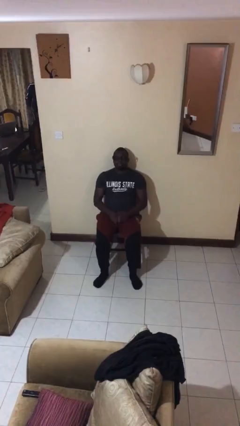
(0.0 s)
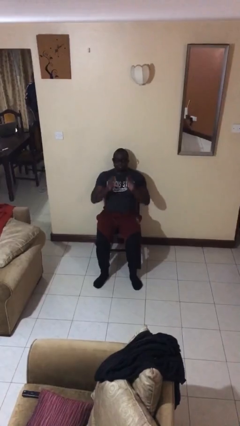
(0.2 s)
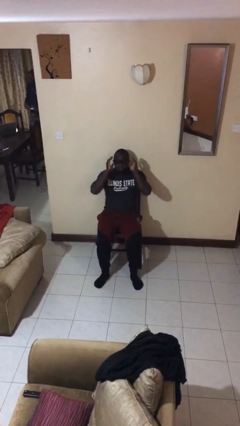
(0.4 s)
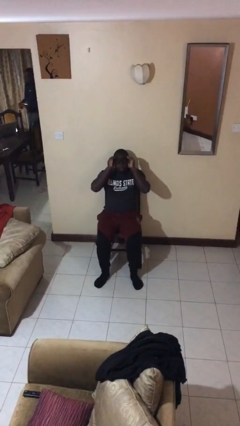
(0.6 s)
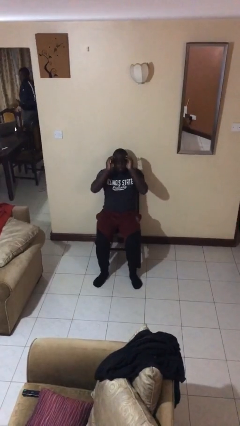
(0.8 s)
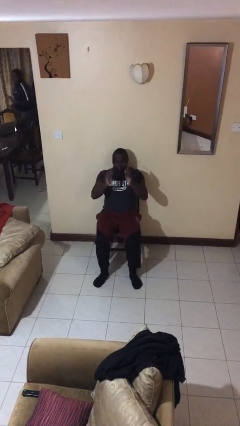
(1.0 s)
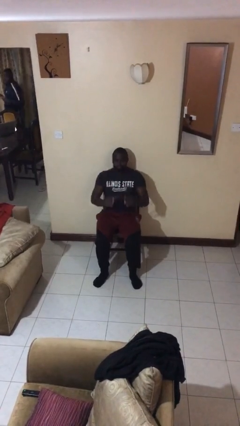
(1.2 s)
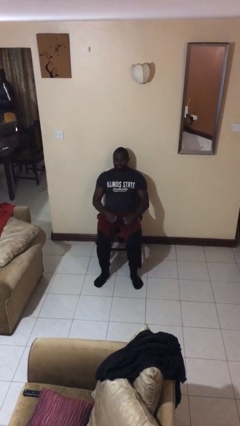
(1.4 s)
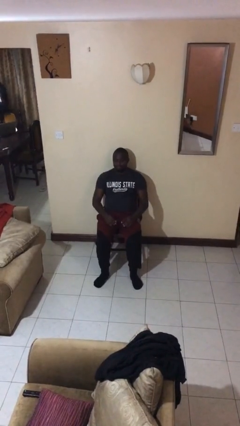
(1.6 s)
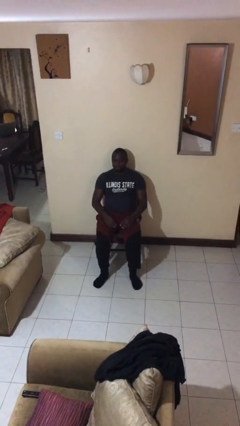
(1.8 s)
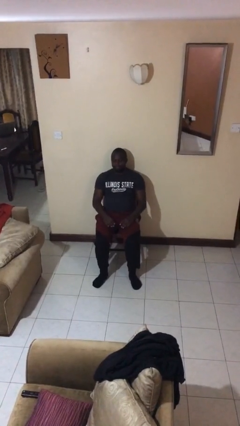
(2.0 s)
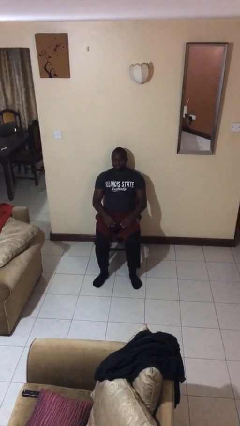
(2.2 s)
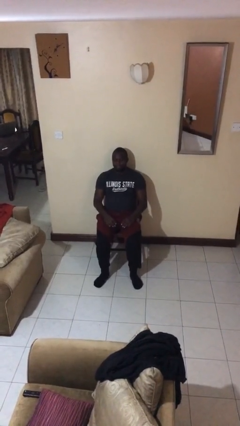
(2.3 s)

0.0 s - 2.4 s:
person takes off glasses

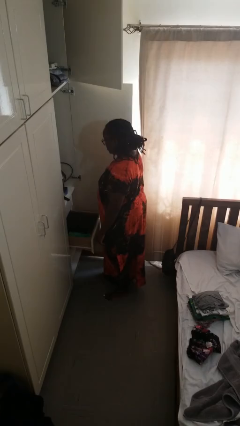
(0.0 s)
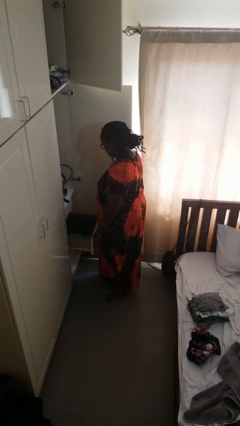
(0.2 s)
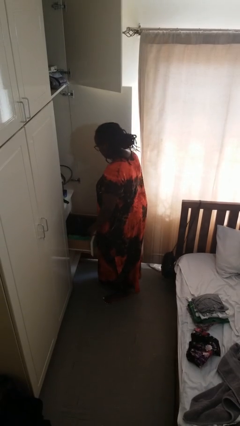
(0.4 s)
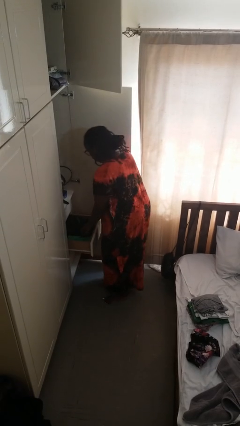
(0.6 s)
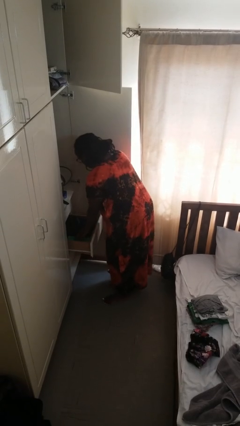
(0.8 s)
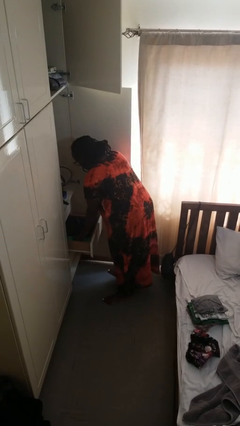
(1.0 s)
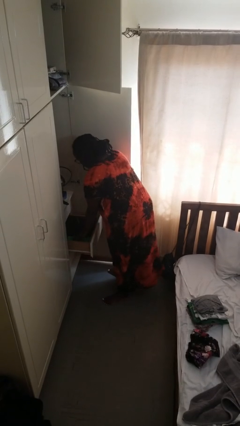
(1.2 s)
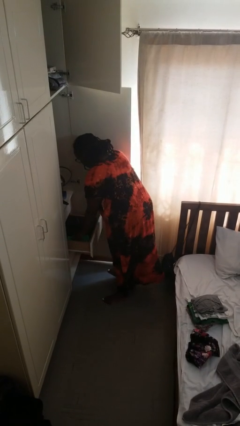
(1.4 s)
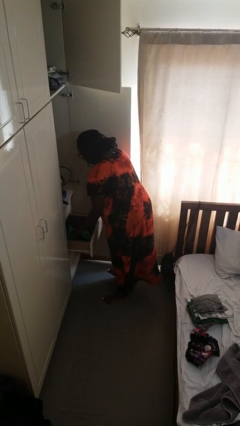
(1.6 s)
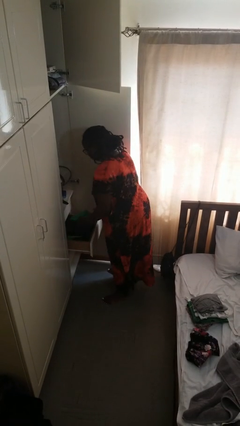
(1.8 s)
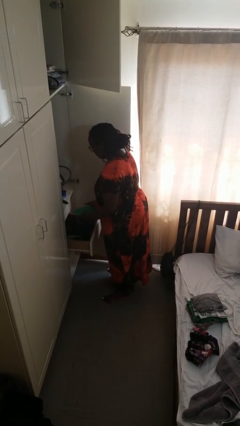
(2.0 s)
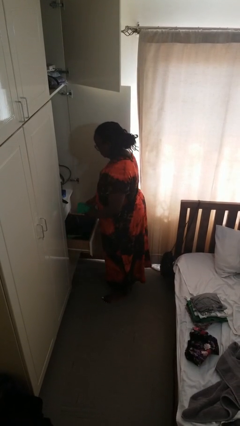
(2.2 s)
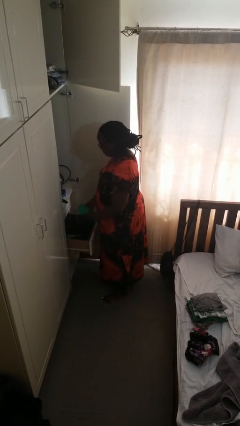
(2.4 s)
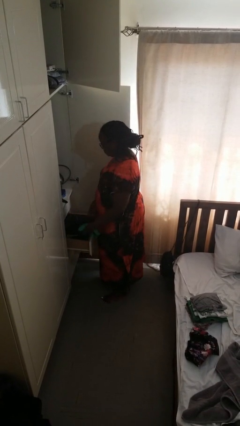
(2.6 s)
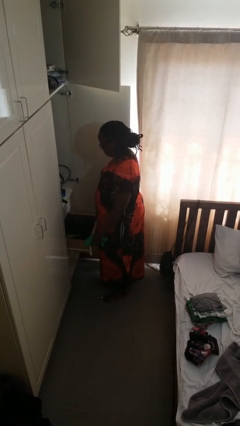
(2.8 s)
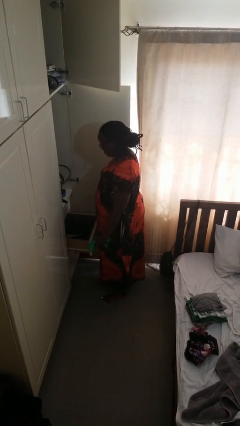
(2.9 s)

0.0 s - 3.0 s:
person takes clothes from dresser

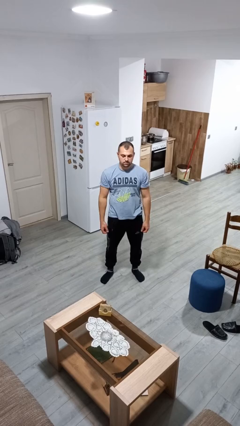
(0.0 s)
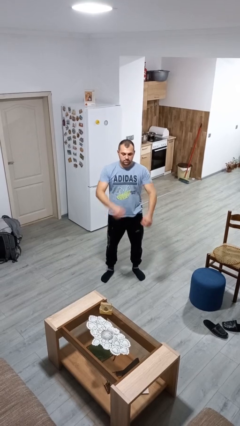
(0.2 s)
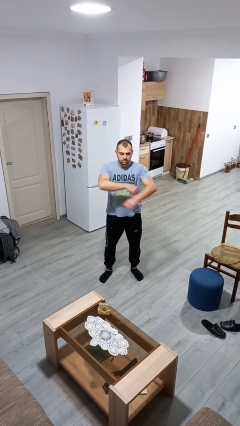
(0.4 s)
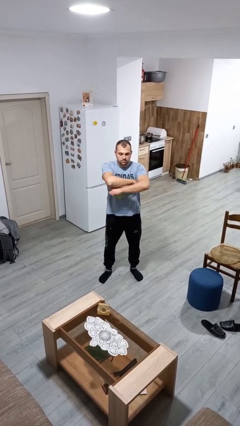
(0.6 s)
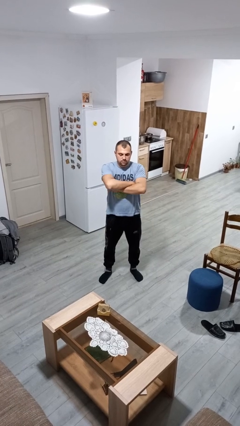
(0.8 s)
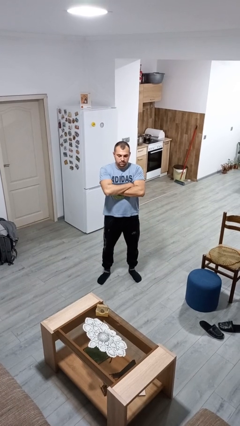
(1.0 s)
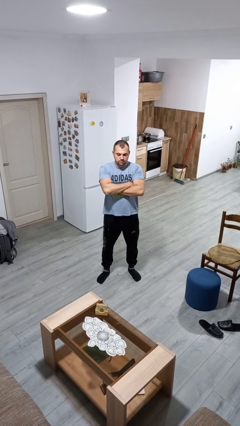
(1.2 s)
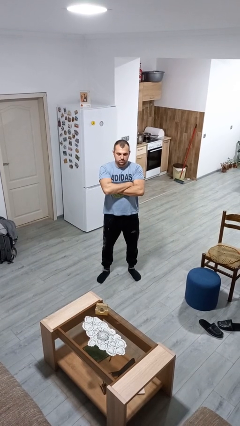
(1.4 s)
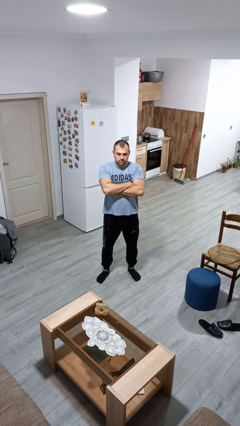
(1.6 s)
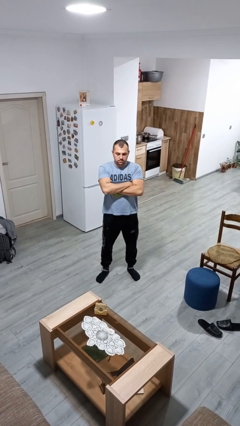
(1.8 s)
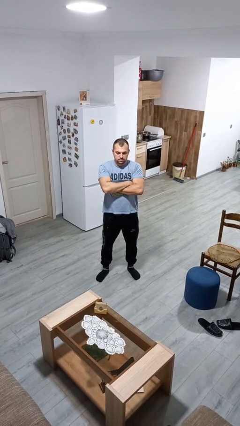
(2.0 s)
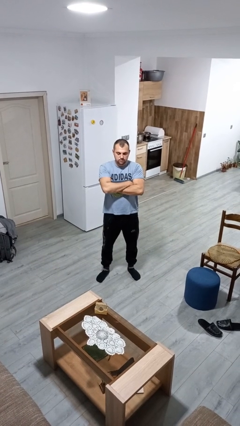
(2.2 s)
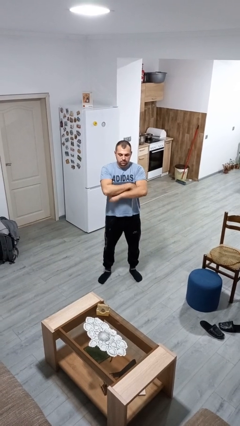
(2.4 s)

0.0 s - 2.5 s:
person crosses arms

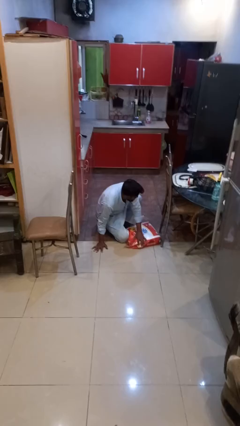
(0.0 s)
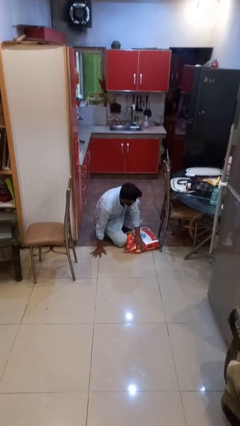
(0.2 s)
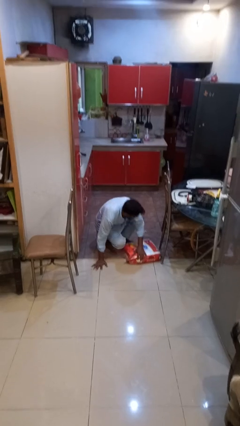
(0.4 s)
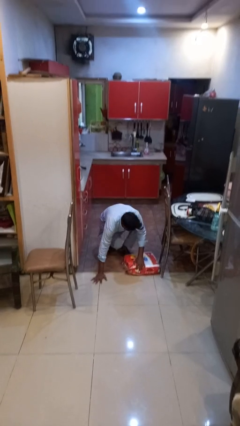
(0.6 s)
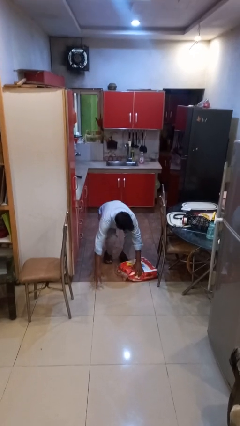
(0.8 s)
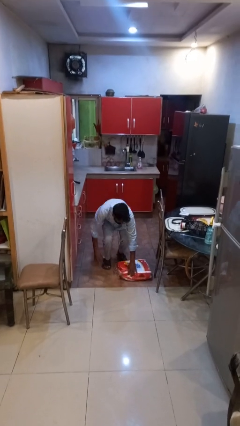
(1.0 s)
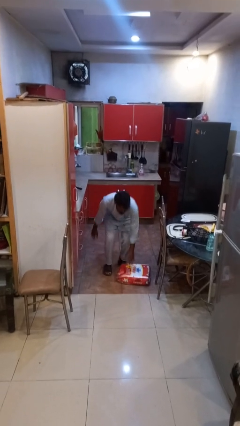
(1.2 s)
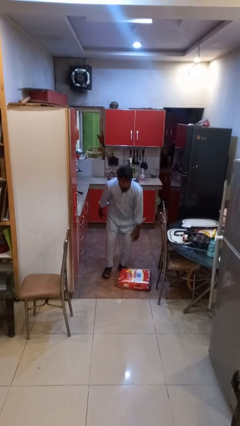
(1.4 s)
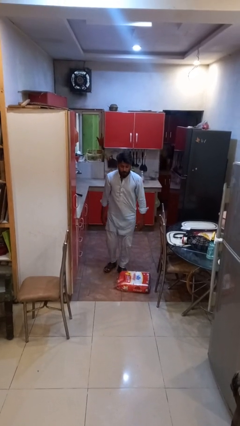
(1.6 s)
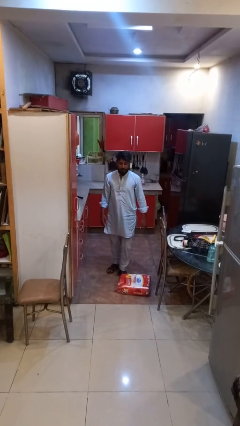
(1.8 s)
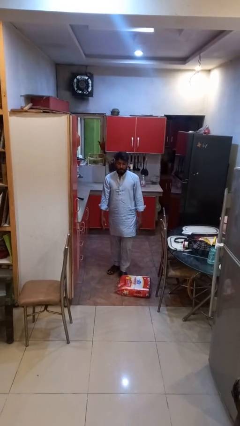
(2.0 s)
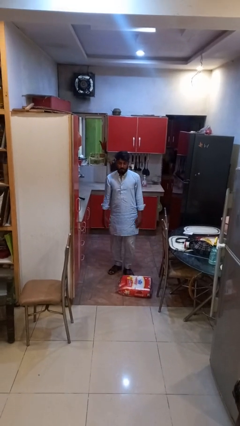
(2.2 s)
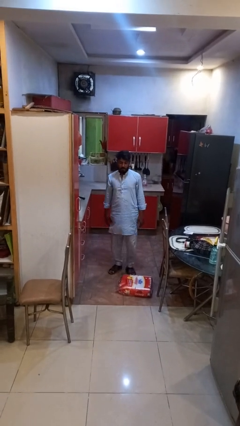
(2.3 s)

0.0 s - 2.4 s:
person stands up from floor

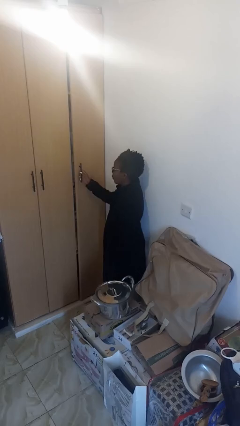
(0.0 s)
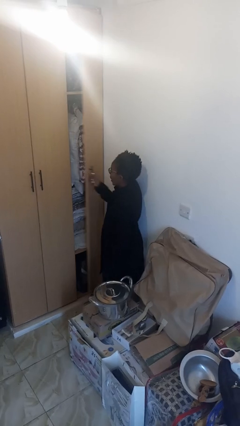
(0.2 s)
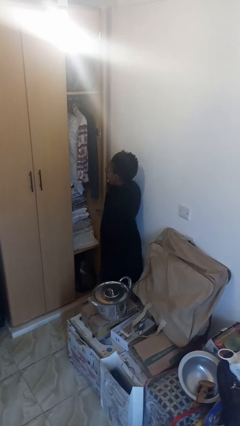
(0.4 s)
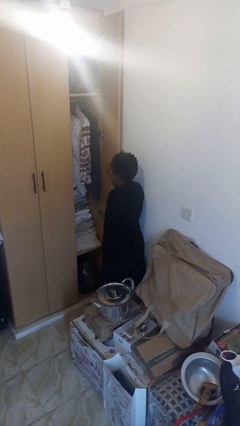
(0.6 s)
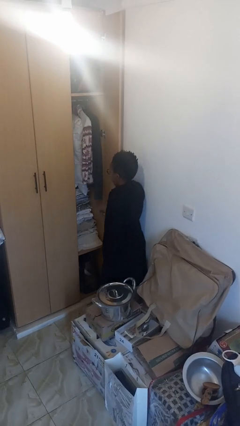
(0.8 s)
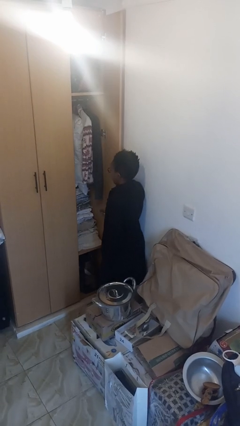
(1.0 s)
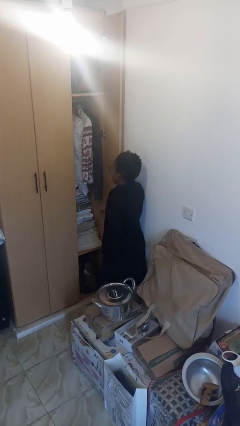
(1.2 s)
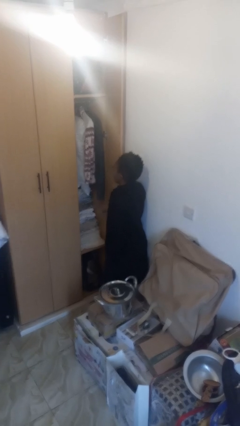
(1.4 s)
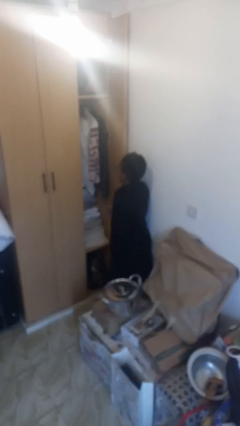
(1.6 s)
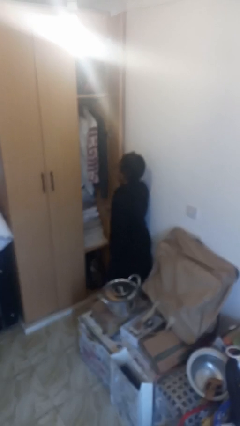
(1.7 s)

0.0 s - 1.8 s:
person opens closet door

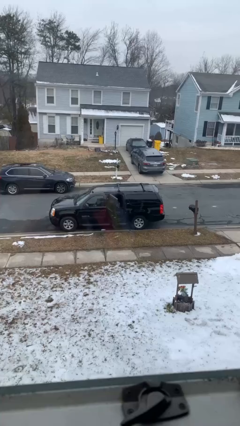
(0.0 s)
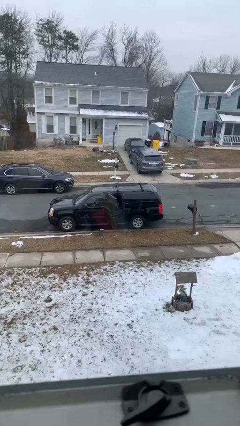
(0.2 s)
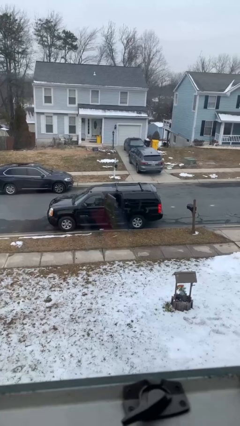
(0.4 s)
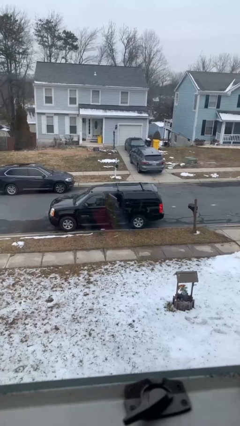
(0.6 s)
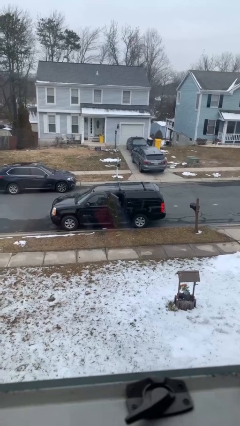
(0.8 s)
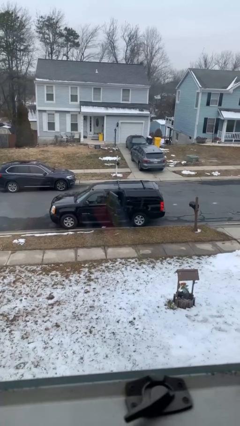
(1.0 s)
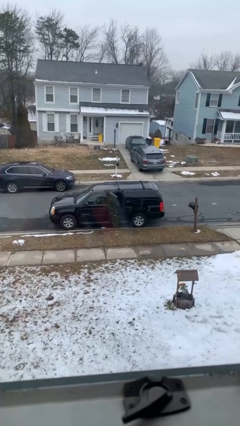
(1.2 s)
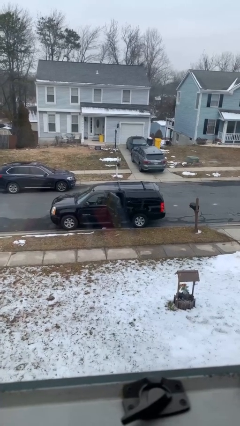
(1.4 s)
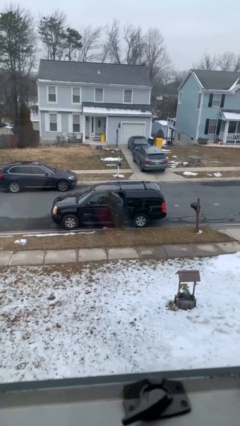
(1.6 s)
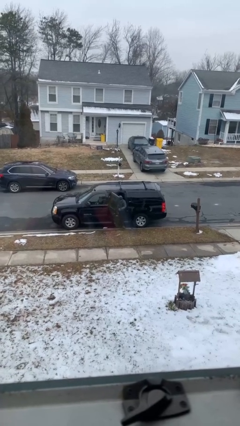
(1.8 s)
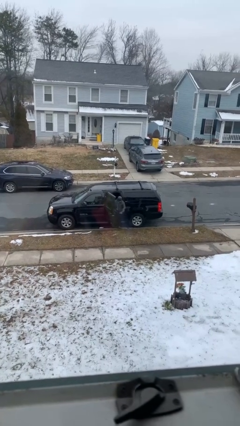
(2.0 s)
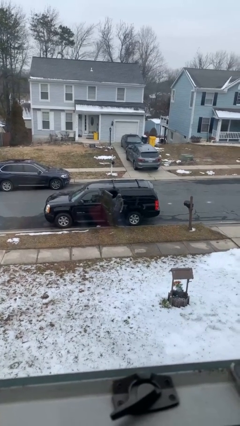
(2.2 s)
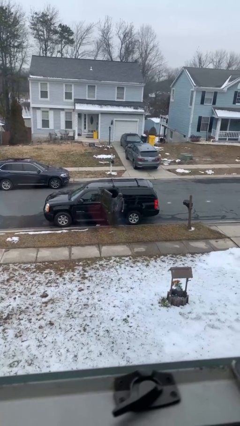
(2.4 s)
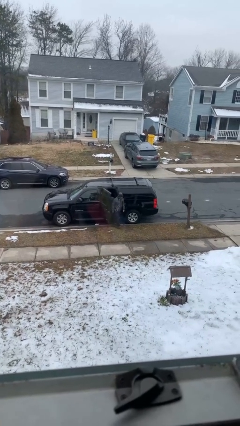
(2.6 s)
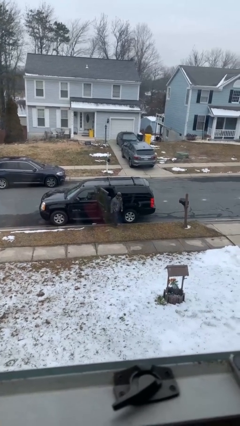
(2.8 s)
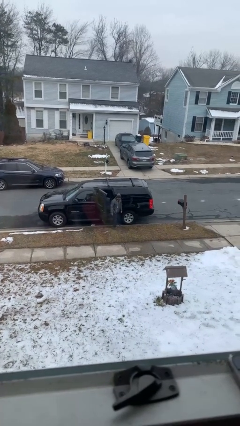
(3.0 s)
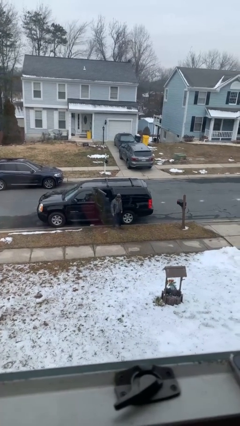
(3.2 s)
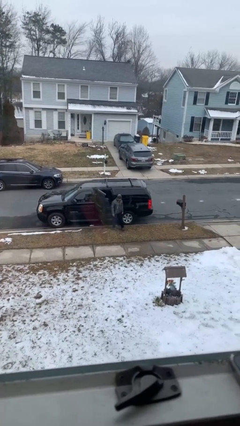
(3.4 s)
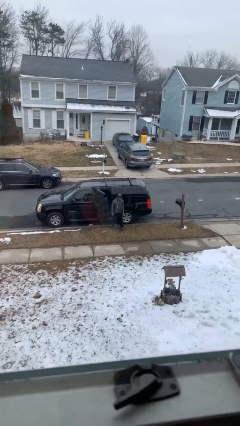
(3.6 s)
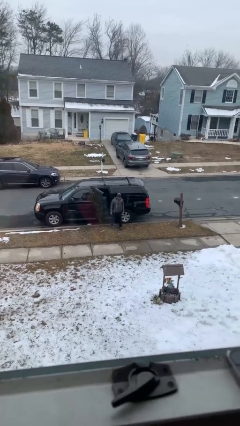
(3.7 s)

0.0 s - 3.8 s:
person exits car

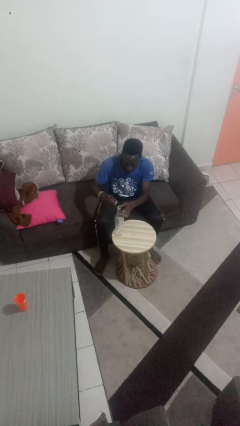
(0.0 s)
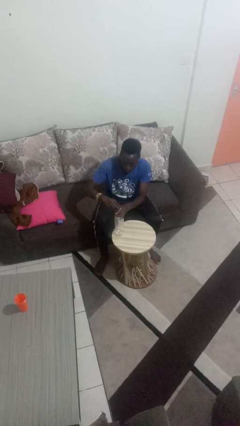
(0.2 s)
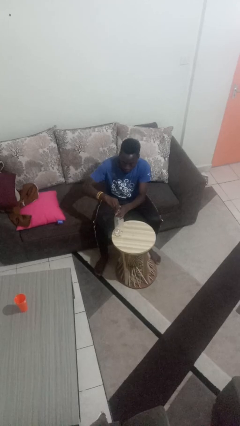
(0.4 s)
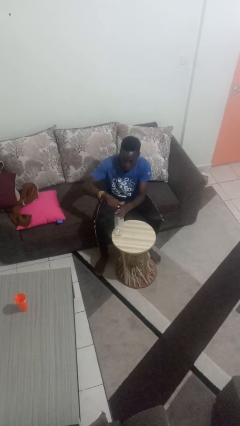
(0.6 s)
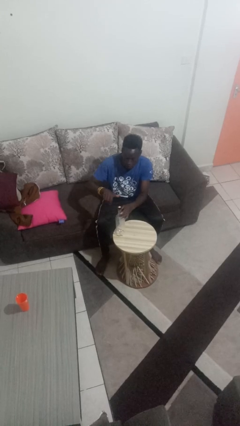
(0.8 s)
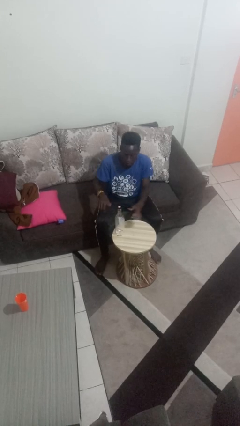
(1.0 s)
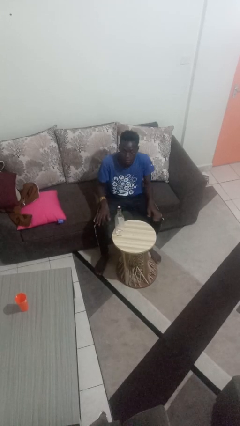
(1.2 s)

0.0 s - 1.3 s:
person screws lid to bottle

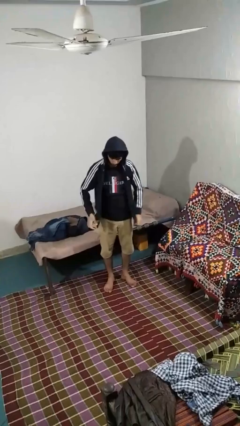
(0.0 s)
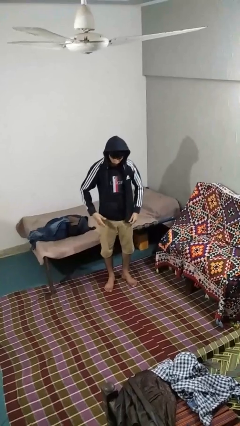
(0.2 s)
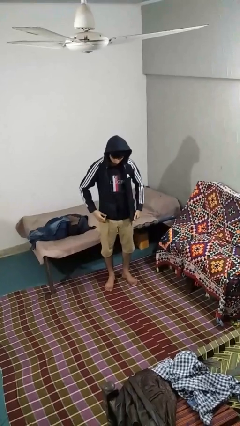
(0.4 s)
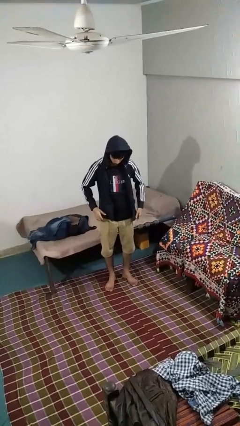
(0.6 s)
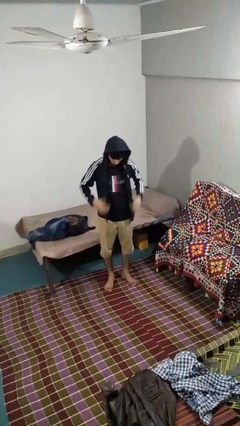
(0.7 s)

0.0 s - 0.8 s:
person puts on hoodie
